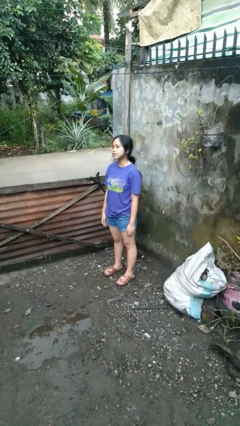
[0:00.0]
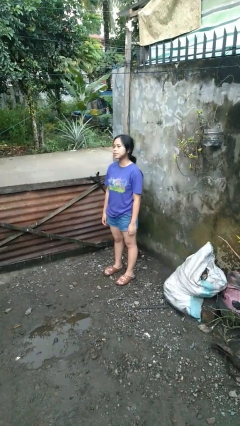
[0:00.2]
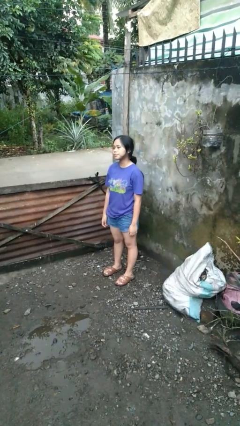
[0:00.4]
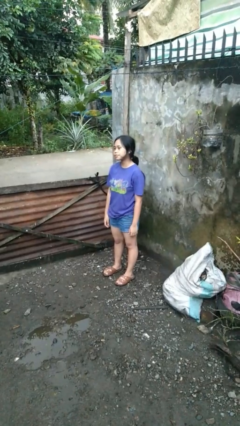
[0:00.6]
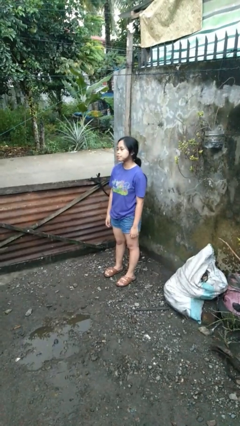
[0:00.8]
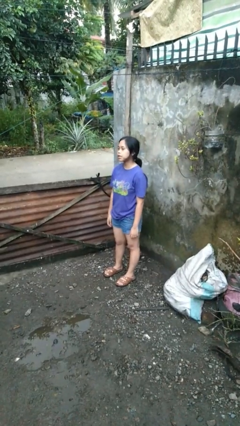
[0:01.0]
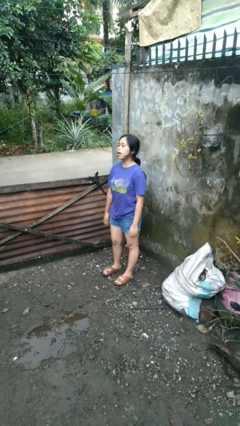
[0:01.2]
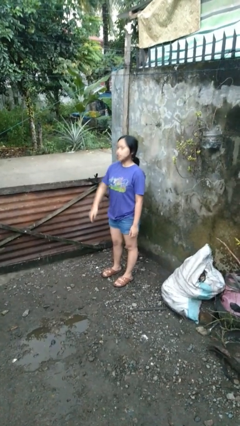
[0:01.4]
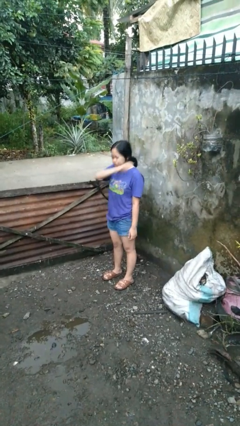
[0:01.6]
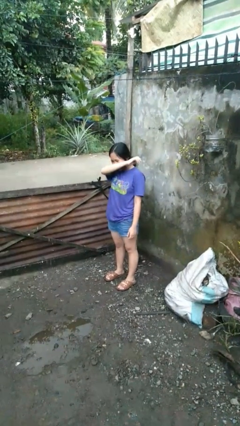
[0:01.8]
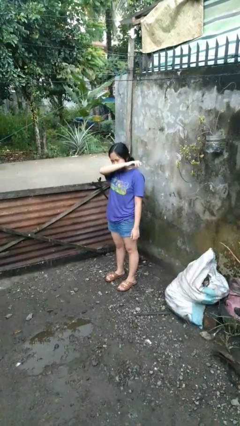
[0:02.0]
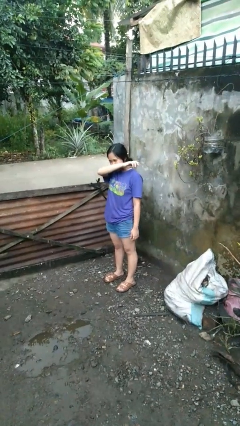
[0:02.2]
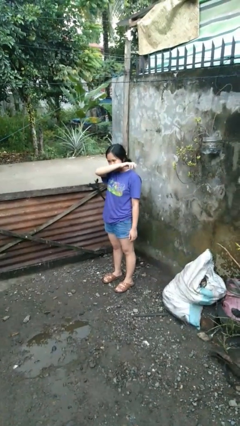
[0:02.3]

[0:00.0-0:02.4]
person sneezes into arm

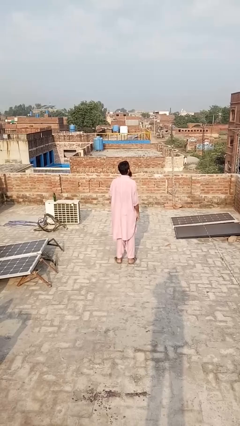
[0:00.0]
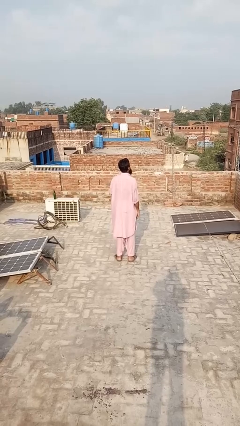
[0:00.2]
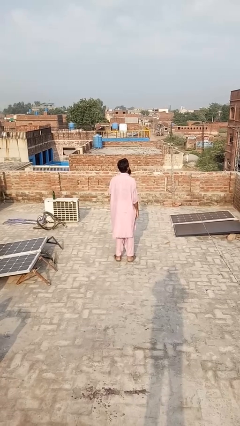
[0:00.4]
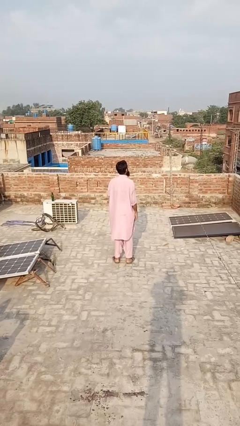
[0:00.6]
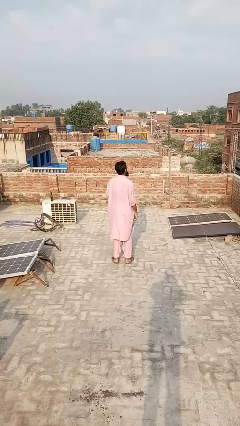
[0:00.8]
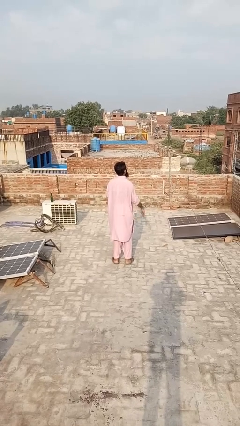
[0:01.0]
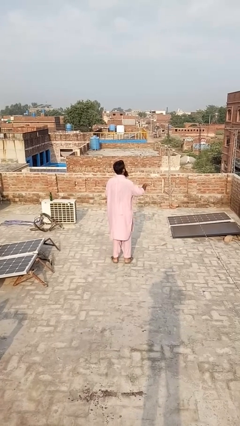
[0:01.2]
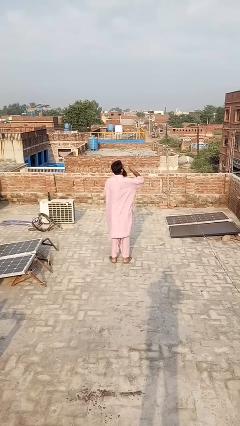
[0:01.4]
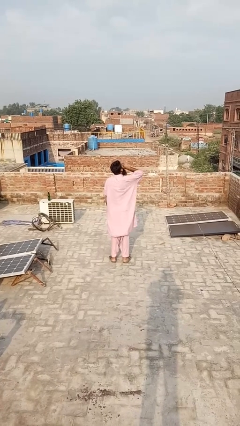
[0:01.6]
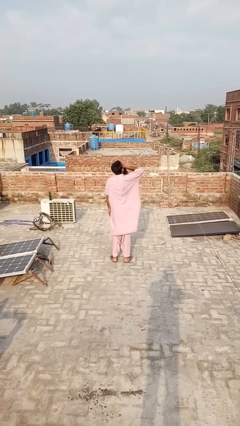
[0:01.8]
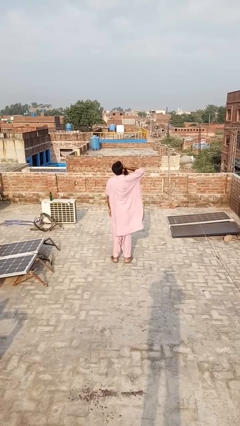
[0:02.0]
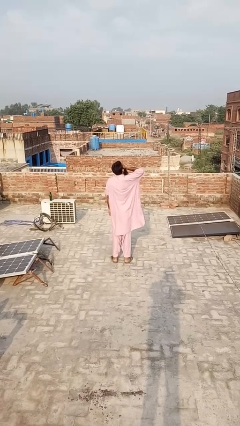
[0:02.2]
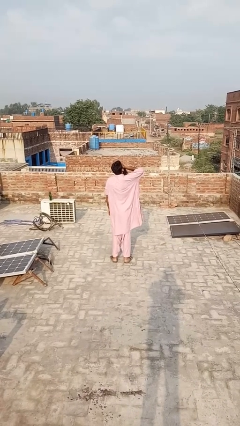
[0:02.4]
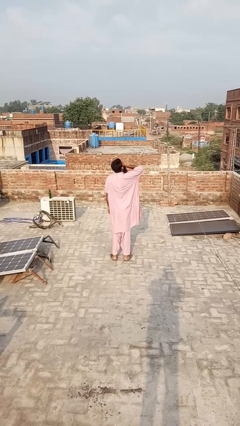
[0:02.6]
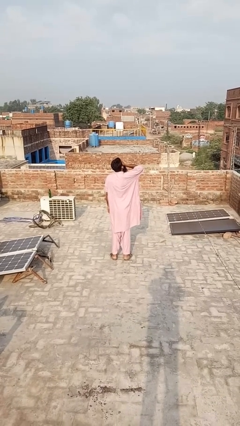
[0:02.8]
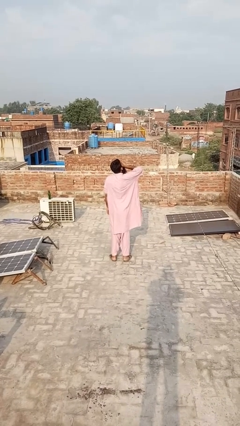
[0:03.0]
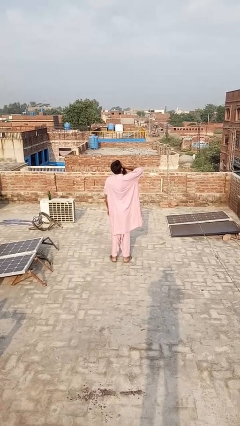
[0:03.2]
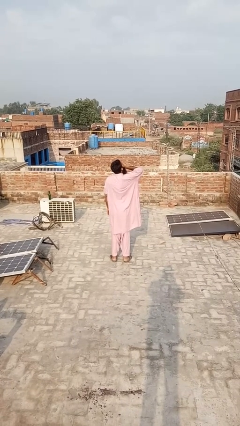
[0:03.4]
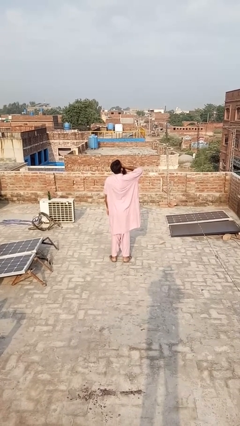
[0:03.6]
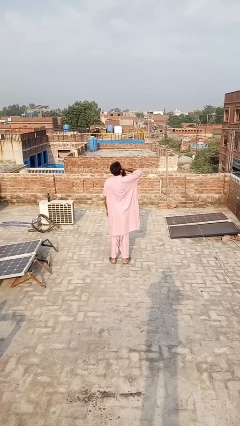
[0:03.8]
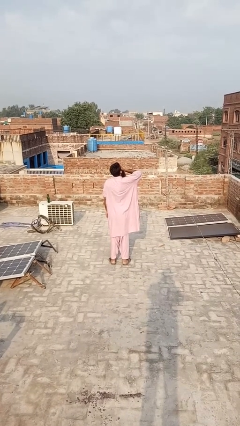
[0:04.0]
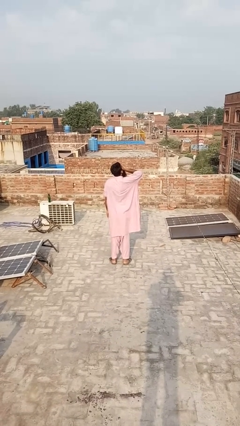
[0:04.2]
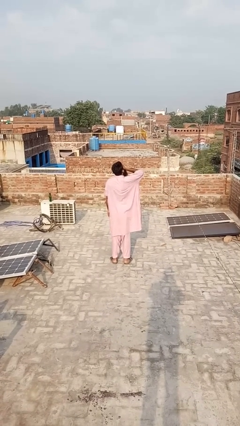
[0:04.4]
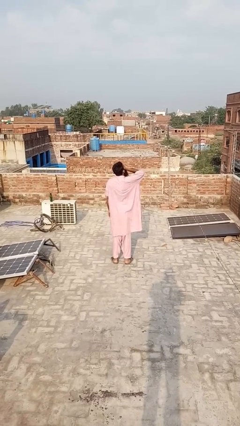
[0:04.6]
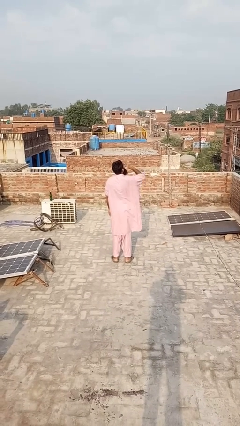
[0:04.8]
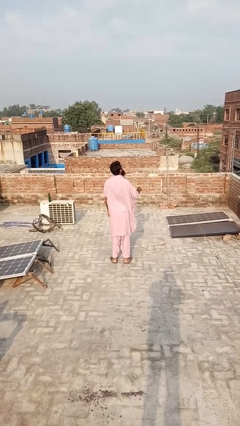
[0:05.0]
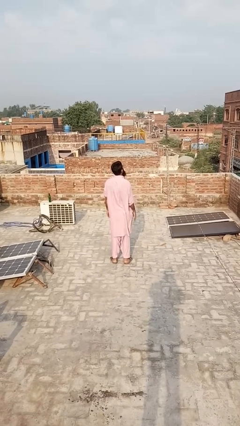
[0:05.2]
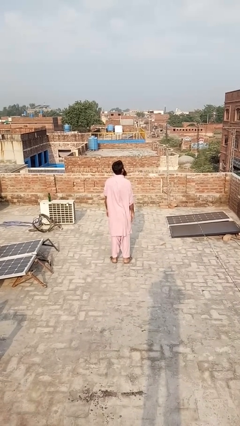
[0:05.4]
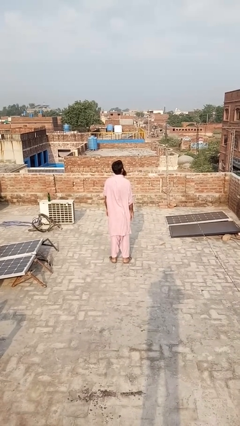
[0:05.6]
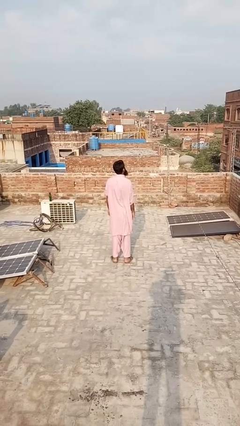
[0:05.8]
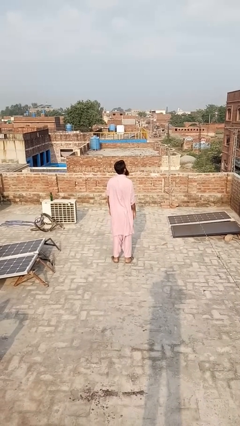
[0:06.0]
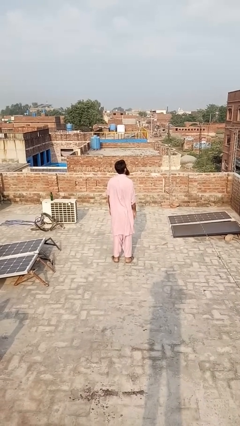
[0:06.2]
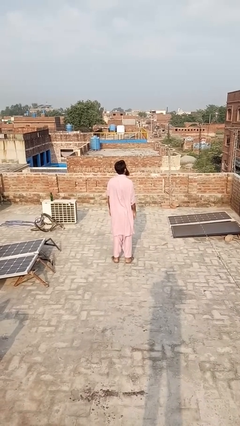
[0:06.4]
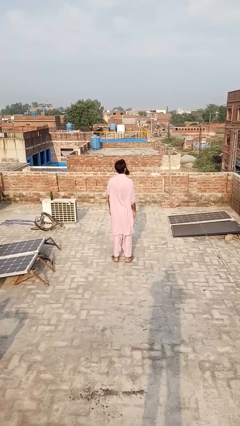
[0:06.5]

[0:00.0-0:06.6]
person yawns

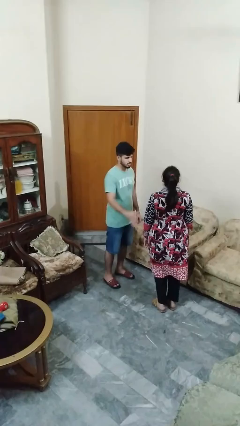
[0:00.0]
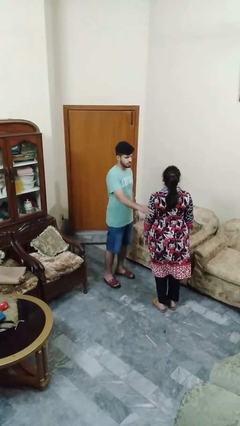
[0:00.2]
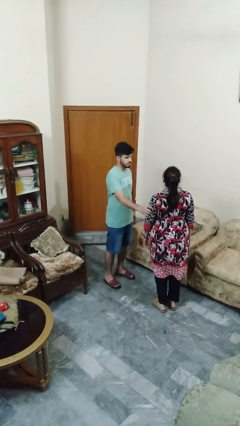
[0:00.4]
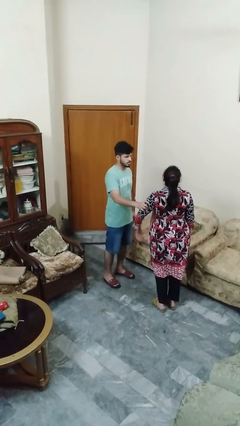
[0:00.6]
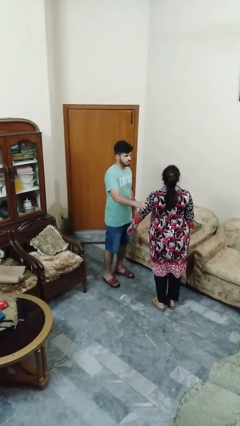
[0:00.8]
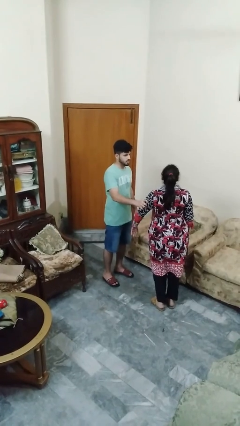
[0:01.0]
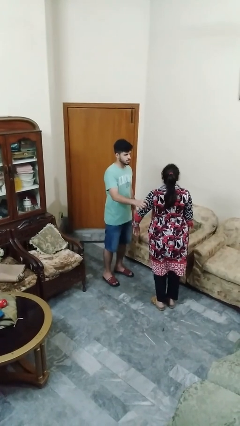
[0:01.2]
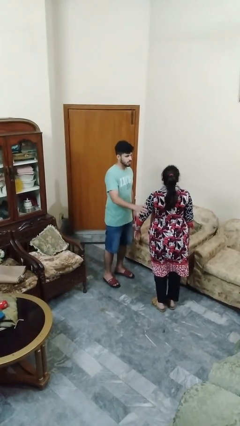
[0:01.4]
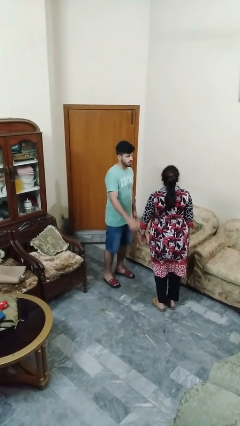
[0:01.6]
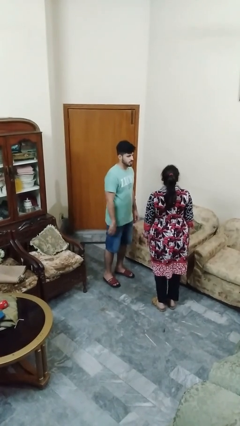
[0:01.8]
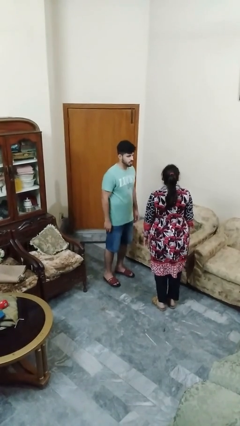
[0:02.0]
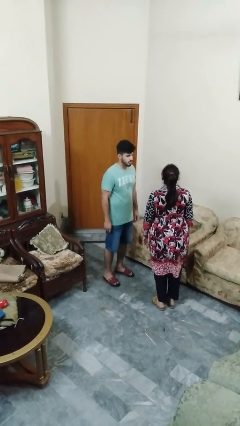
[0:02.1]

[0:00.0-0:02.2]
person grabs person by bicep

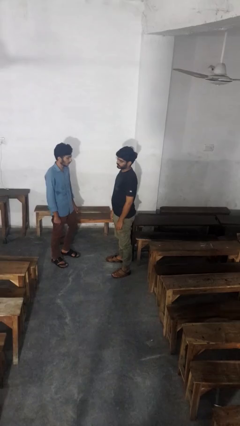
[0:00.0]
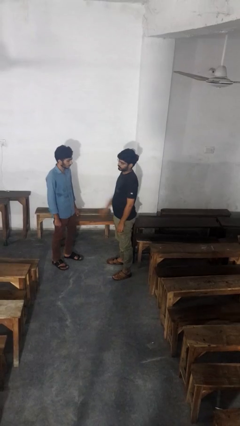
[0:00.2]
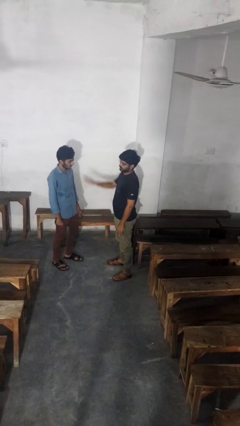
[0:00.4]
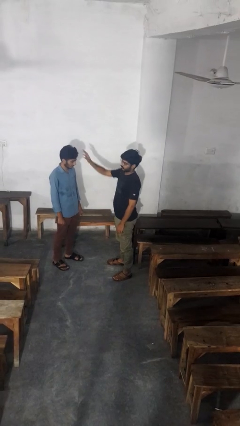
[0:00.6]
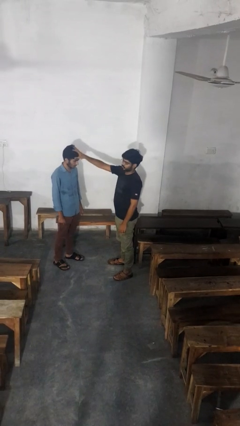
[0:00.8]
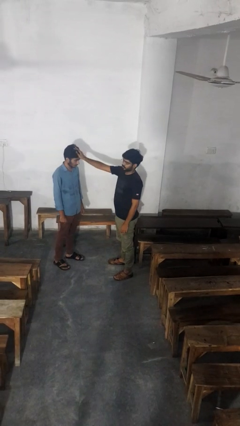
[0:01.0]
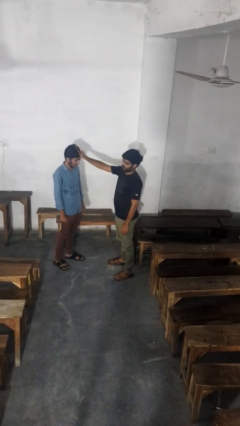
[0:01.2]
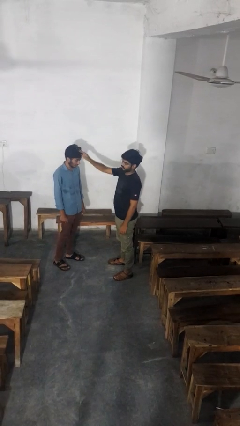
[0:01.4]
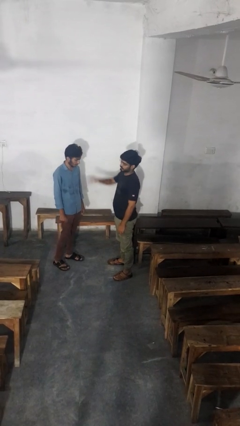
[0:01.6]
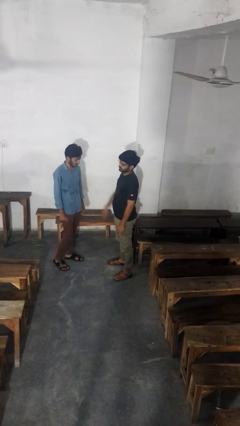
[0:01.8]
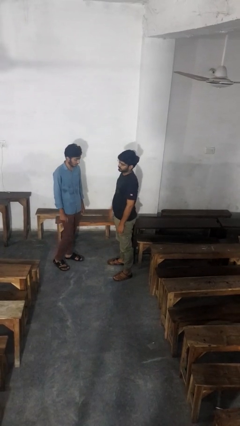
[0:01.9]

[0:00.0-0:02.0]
person grabs person by hair

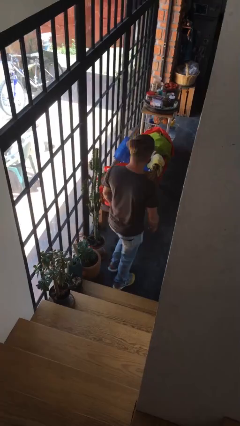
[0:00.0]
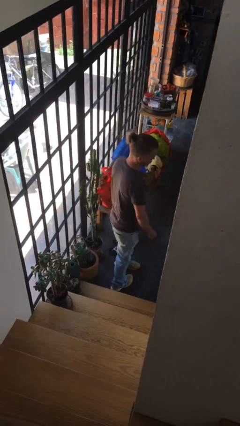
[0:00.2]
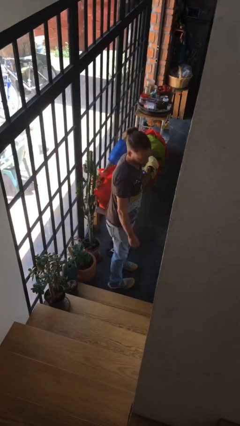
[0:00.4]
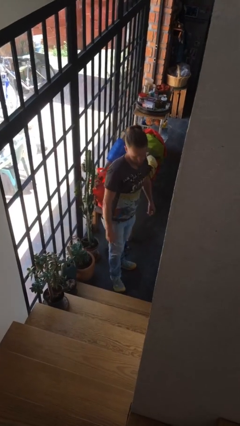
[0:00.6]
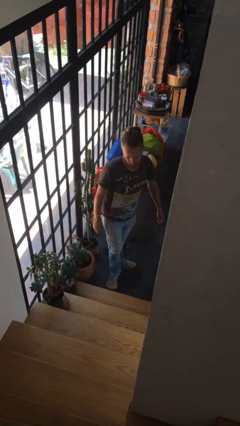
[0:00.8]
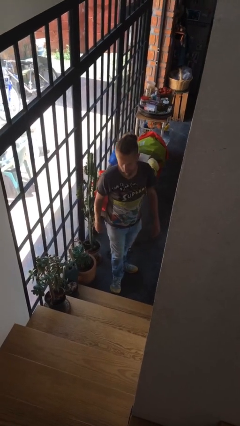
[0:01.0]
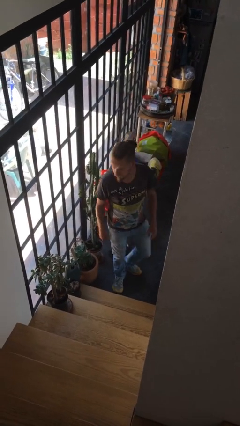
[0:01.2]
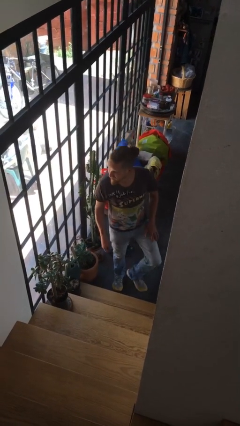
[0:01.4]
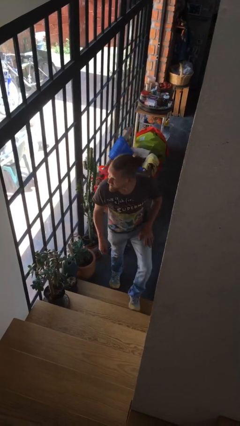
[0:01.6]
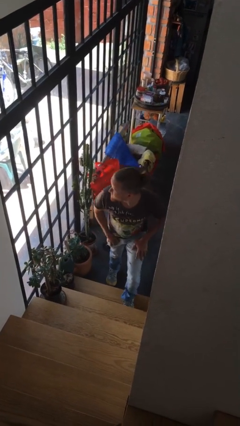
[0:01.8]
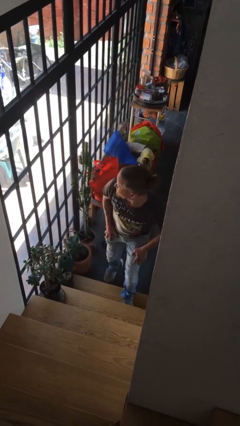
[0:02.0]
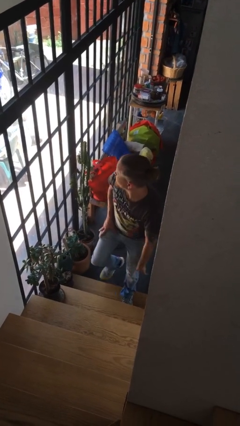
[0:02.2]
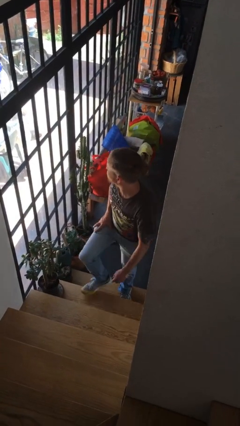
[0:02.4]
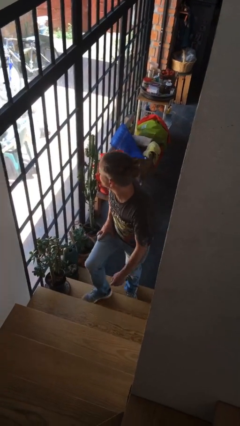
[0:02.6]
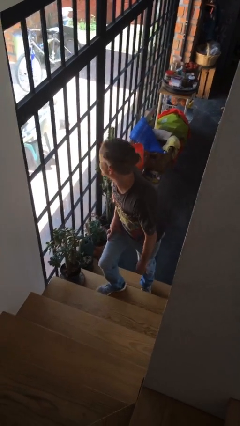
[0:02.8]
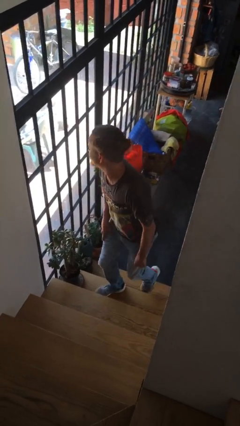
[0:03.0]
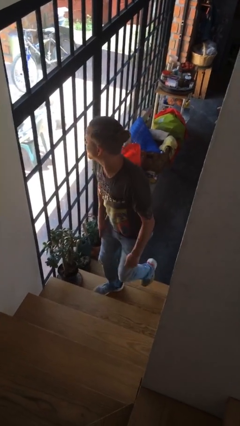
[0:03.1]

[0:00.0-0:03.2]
person climbs up stairs

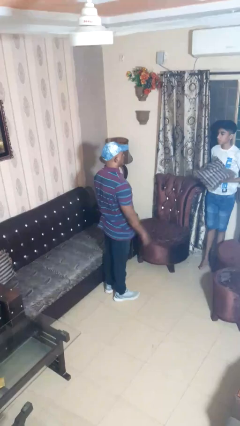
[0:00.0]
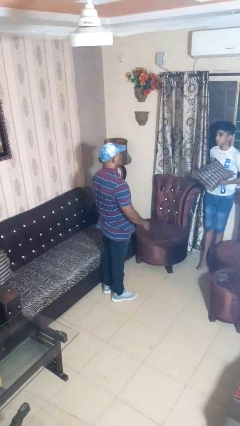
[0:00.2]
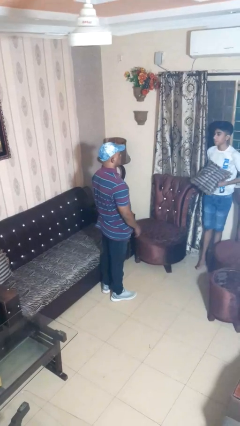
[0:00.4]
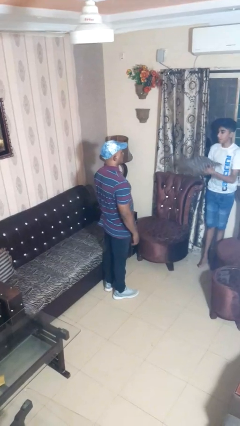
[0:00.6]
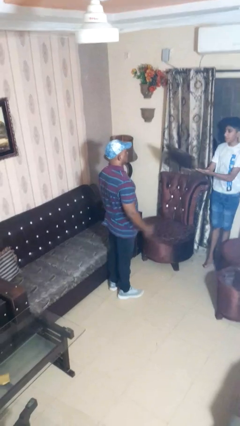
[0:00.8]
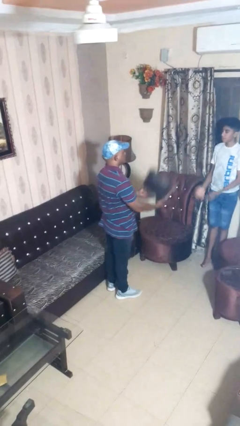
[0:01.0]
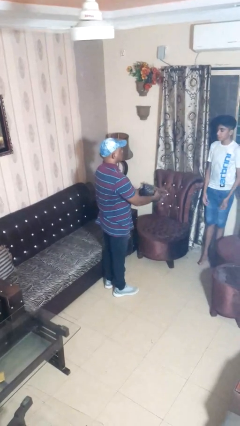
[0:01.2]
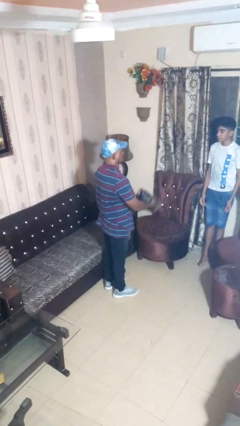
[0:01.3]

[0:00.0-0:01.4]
person catches object from person
